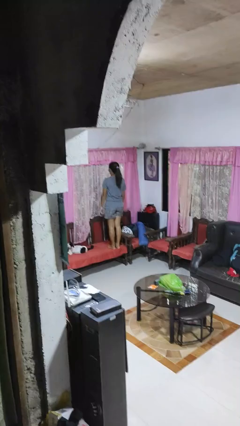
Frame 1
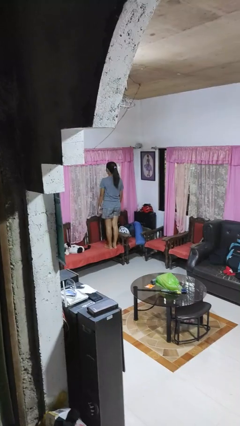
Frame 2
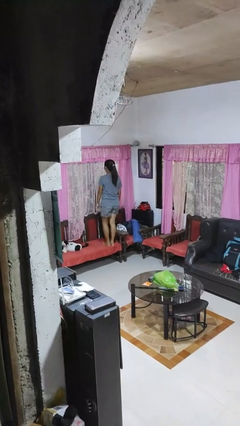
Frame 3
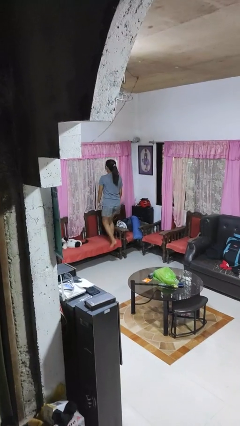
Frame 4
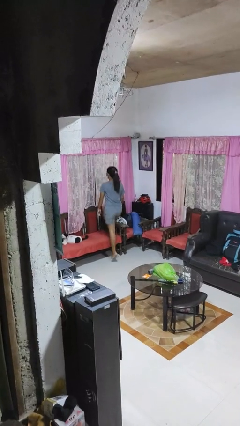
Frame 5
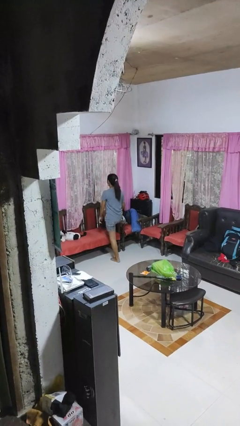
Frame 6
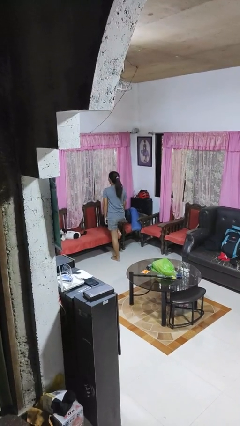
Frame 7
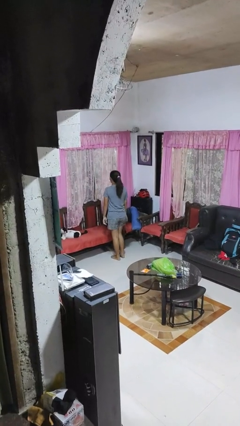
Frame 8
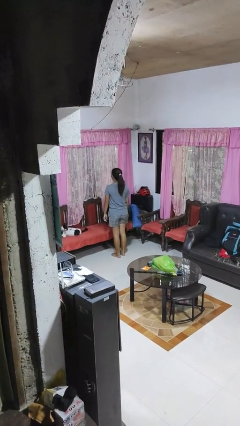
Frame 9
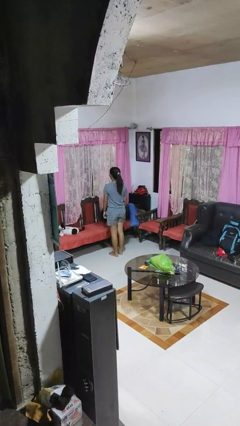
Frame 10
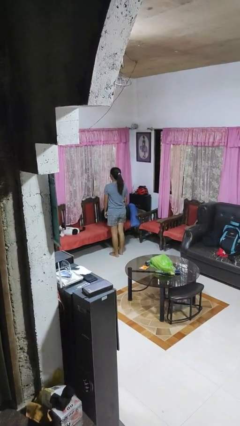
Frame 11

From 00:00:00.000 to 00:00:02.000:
person climbs off chair

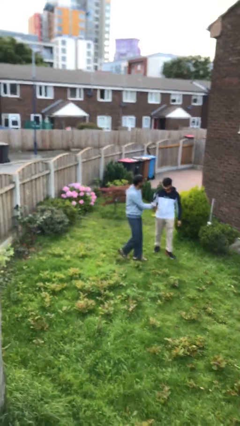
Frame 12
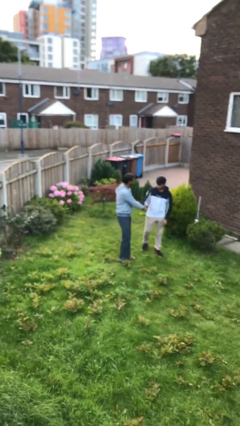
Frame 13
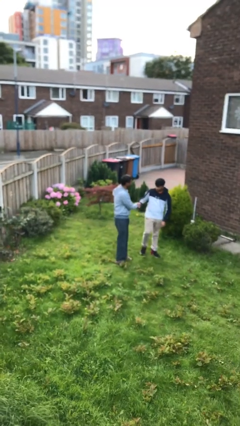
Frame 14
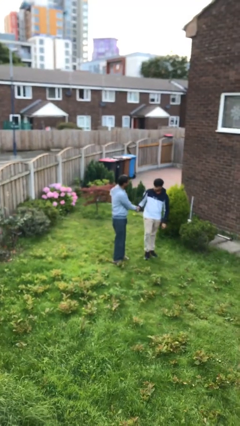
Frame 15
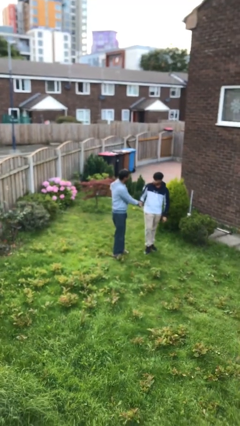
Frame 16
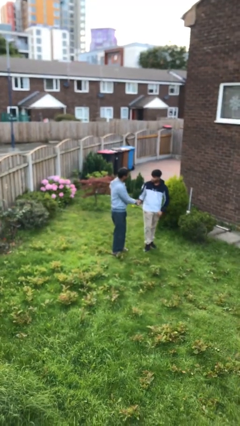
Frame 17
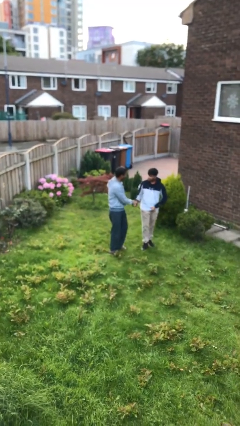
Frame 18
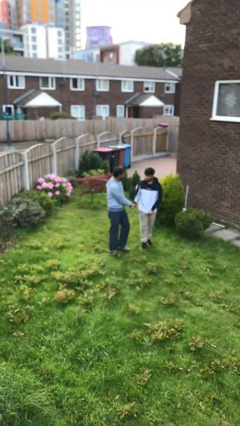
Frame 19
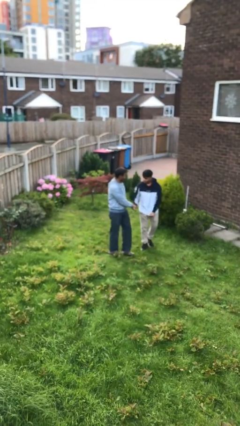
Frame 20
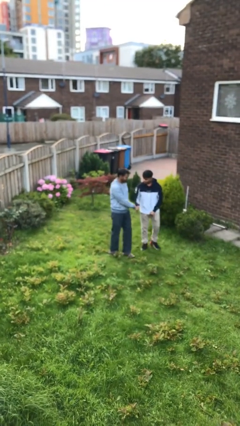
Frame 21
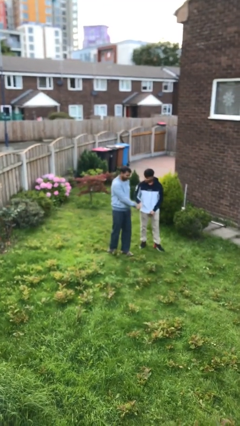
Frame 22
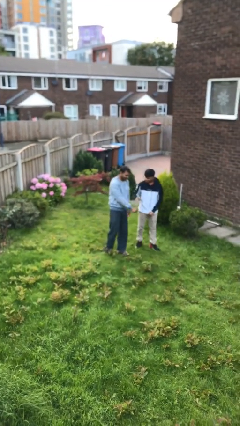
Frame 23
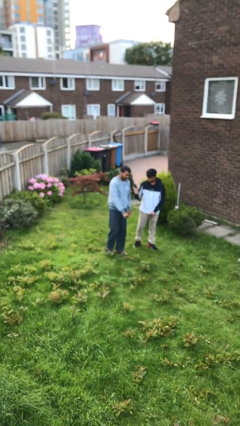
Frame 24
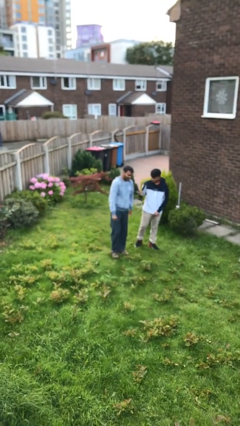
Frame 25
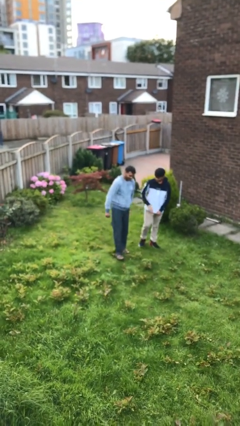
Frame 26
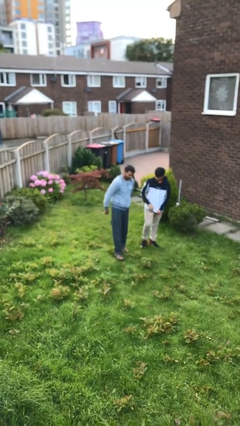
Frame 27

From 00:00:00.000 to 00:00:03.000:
person shakes hand

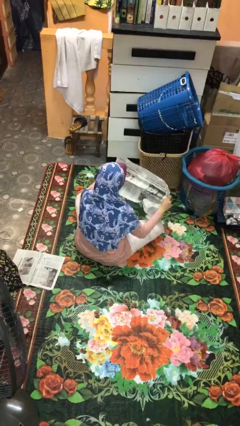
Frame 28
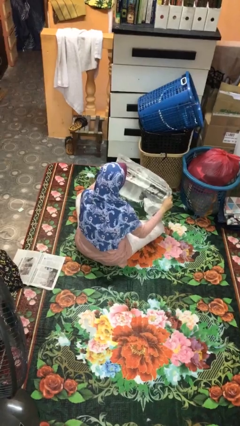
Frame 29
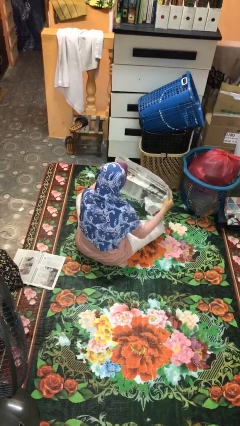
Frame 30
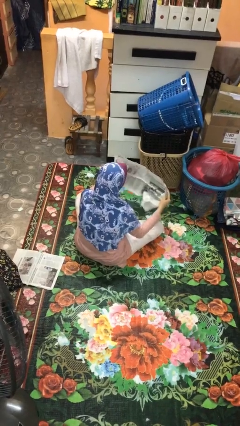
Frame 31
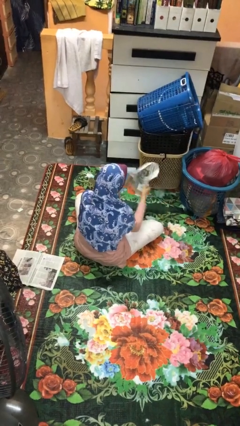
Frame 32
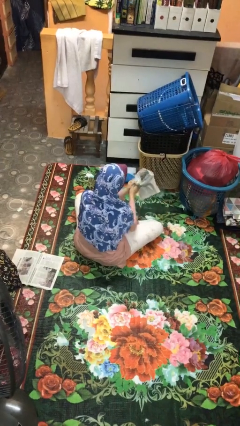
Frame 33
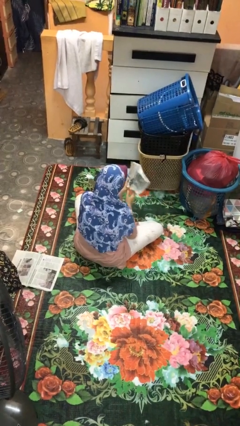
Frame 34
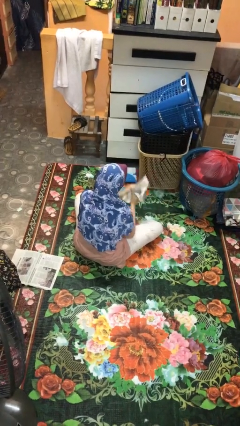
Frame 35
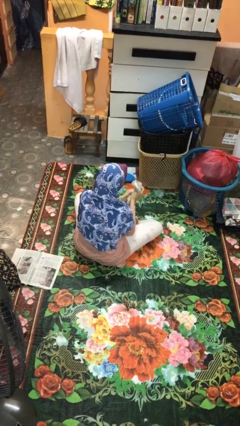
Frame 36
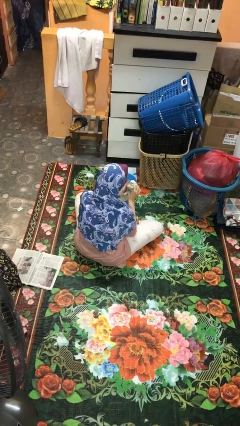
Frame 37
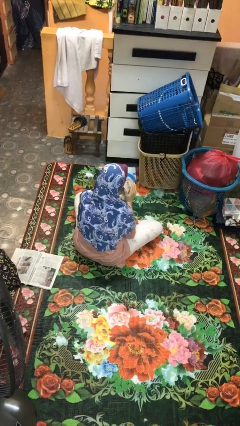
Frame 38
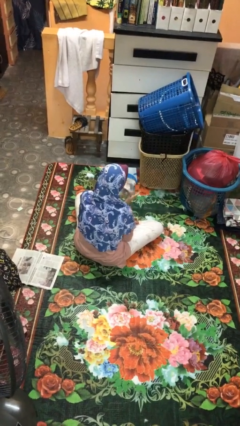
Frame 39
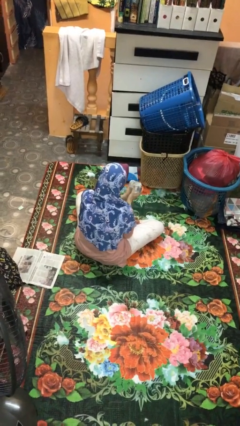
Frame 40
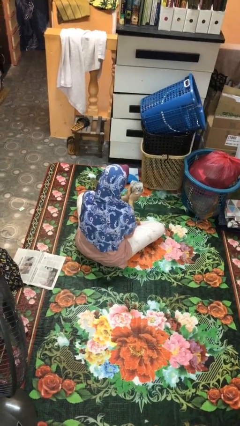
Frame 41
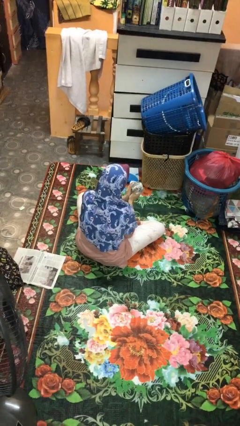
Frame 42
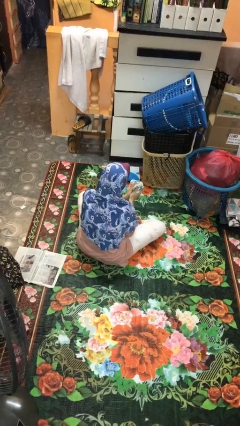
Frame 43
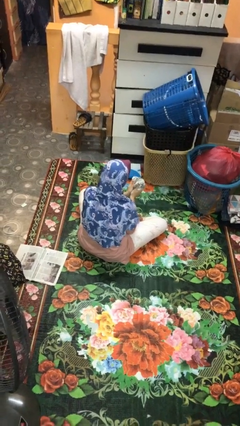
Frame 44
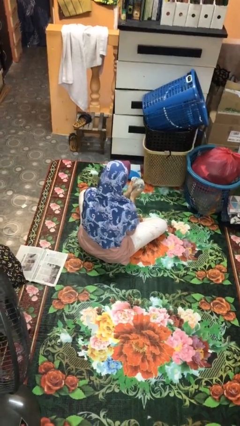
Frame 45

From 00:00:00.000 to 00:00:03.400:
person crumples paper

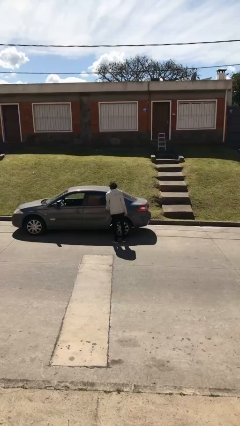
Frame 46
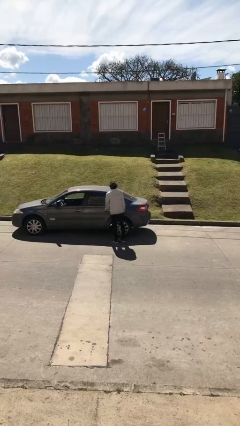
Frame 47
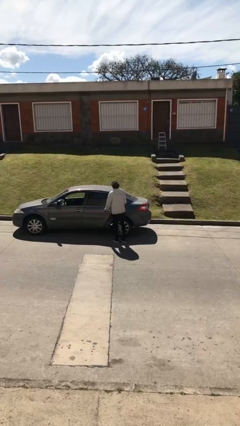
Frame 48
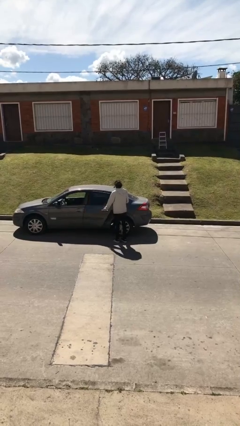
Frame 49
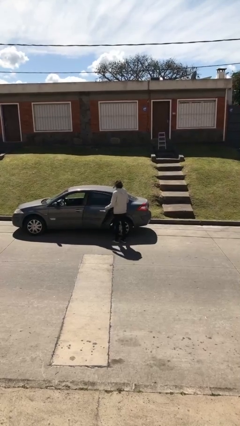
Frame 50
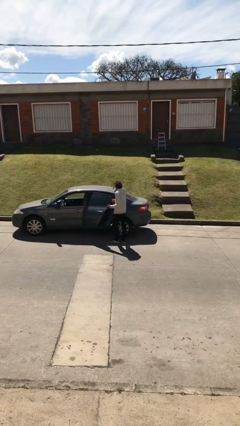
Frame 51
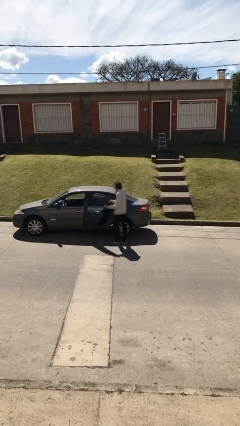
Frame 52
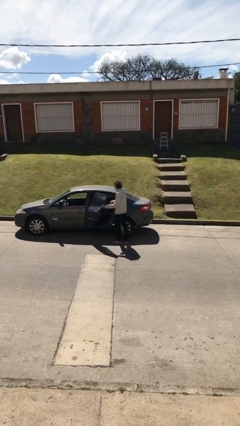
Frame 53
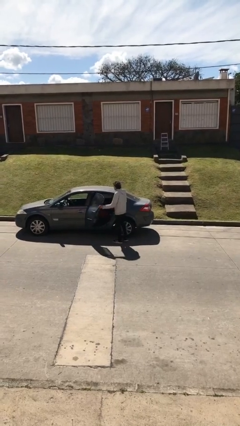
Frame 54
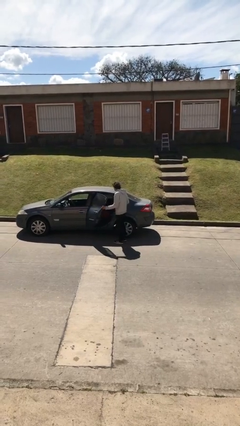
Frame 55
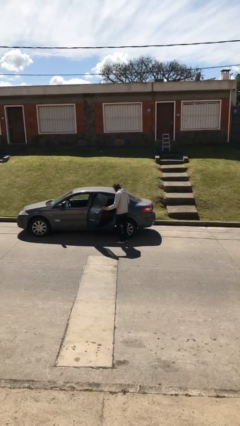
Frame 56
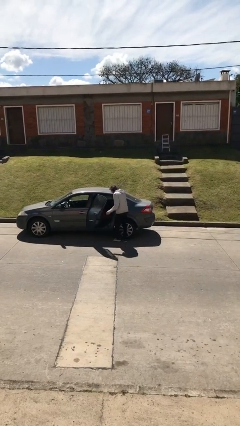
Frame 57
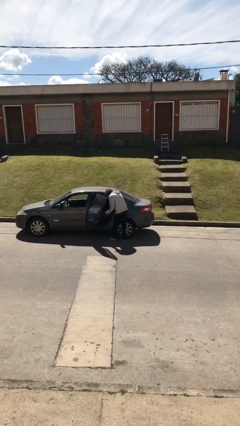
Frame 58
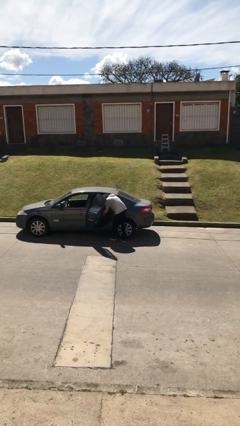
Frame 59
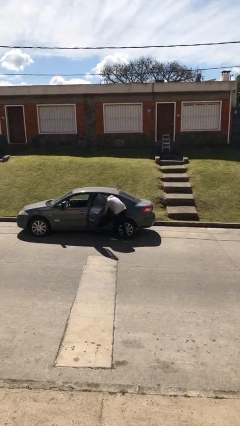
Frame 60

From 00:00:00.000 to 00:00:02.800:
person opens car door

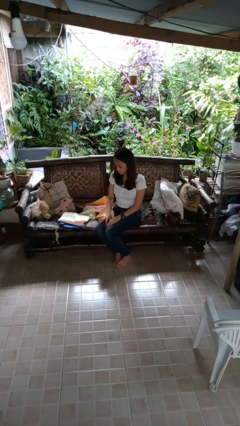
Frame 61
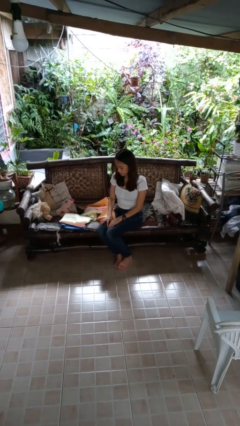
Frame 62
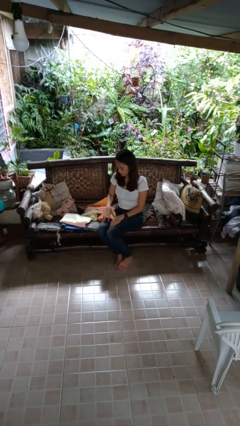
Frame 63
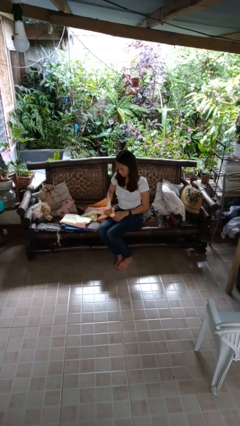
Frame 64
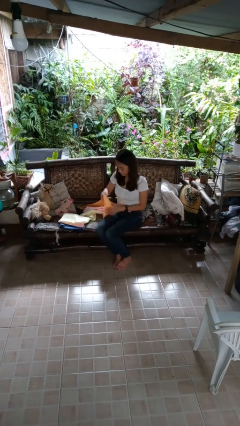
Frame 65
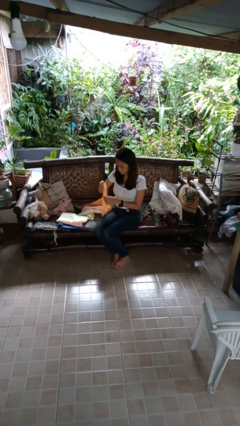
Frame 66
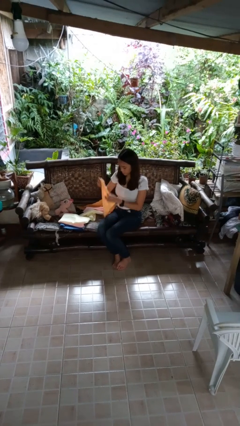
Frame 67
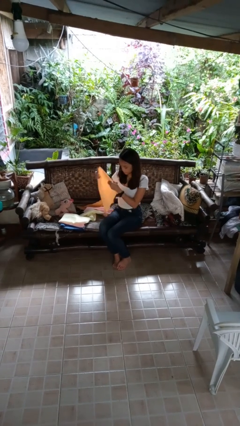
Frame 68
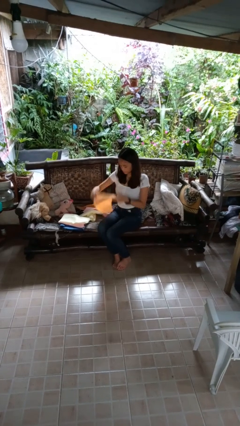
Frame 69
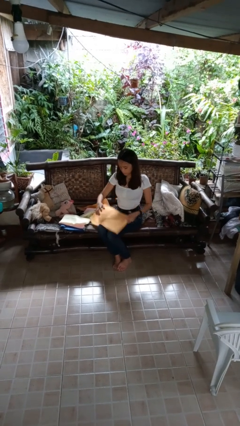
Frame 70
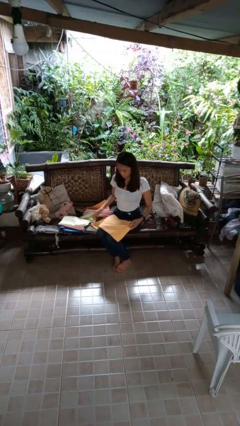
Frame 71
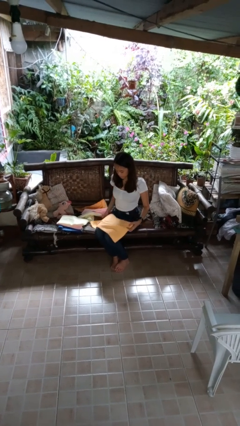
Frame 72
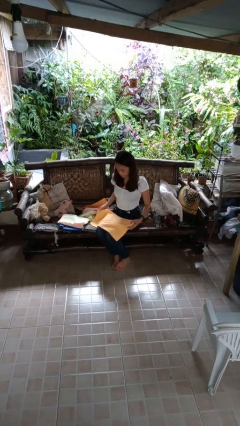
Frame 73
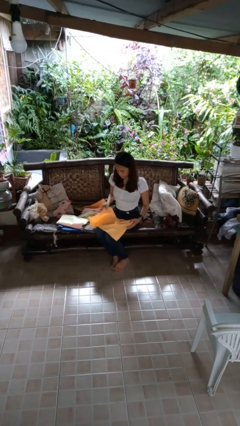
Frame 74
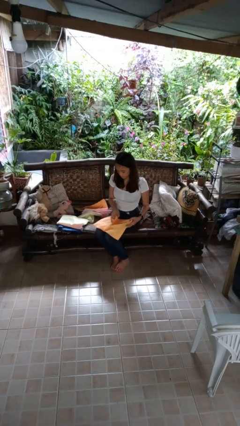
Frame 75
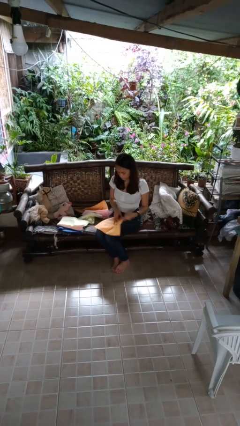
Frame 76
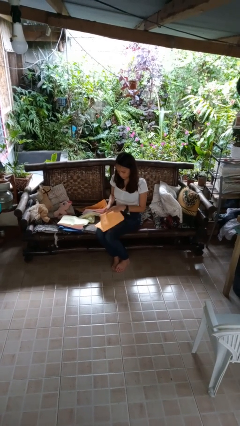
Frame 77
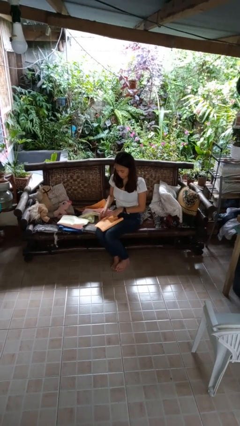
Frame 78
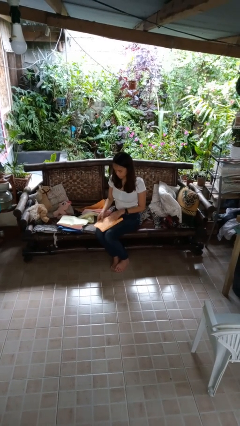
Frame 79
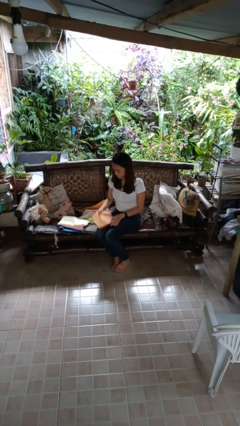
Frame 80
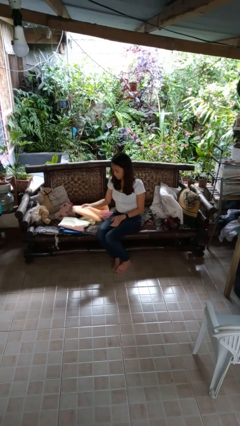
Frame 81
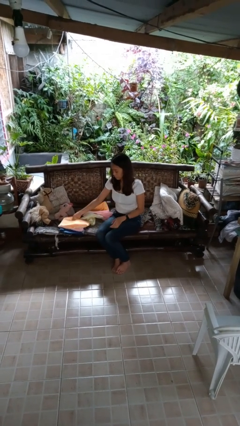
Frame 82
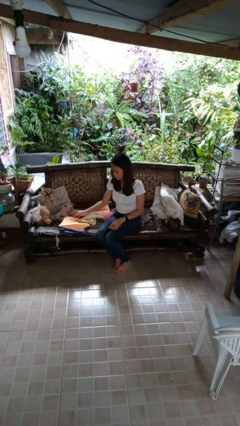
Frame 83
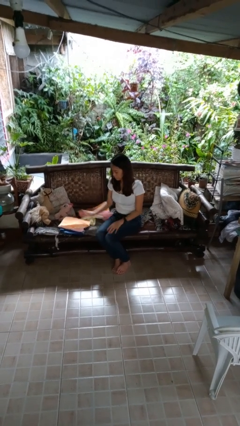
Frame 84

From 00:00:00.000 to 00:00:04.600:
person folds towel

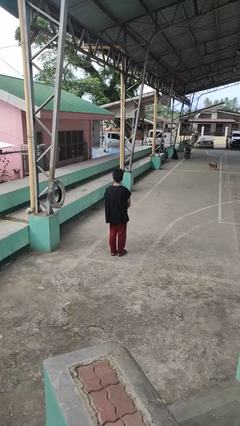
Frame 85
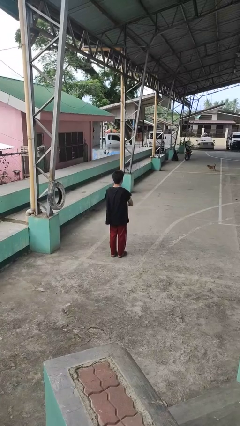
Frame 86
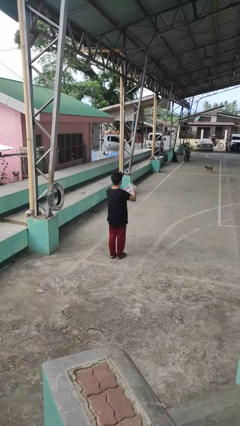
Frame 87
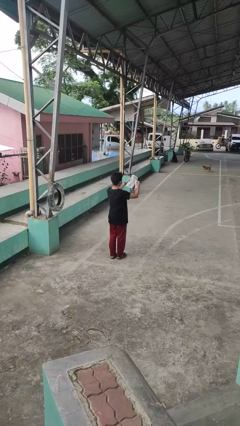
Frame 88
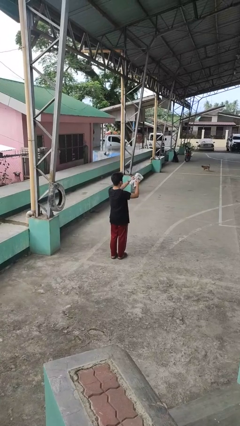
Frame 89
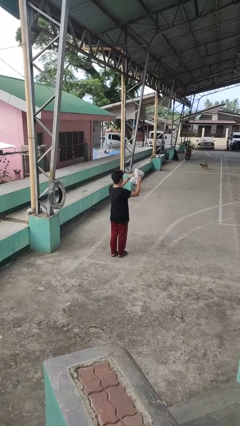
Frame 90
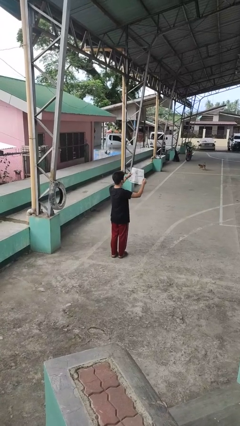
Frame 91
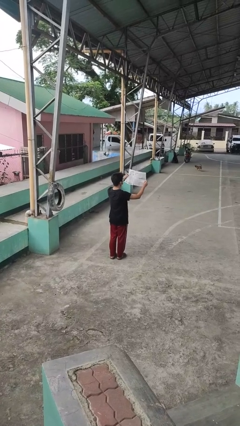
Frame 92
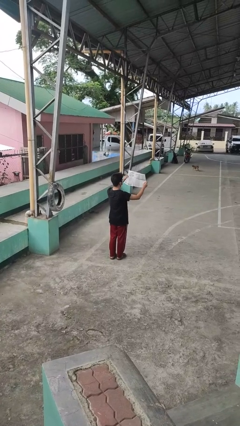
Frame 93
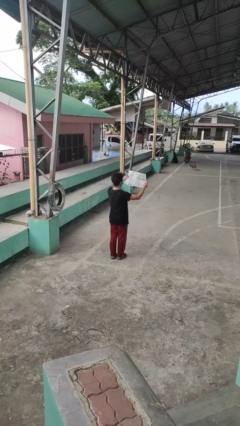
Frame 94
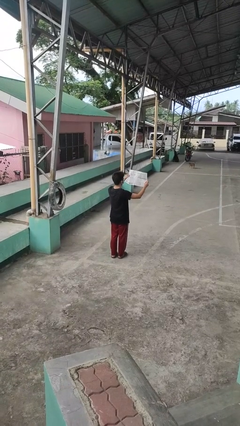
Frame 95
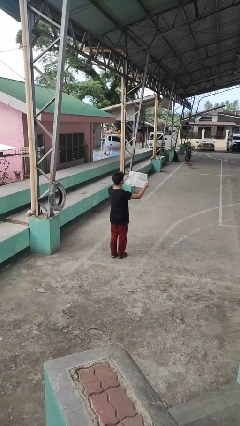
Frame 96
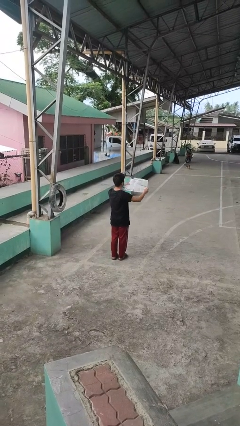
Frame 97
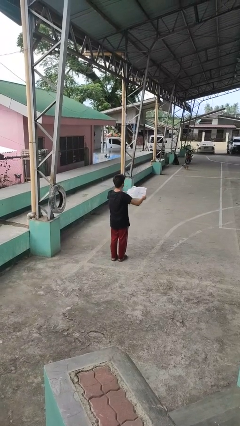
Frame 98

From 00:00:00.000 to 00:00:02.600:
person reads newspaper
